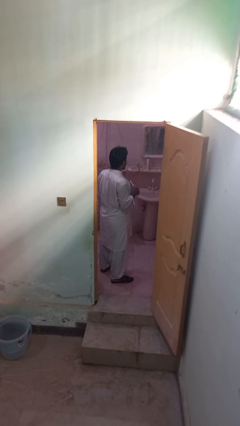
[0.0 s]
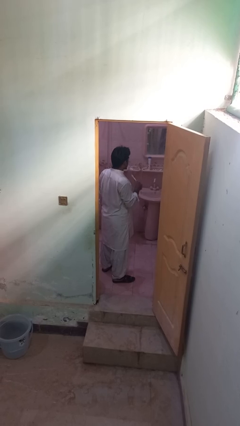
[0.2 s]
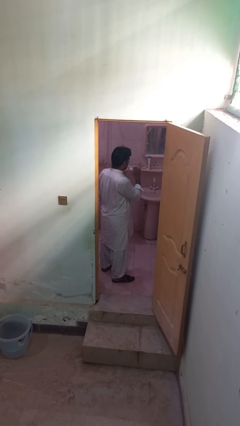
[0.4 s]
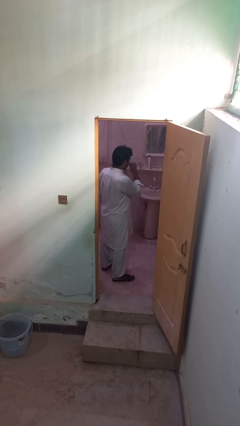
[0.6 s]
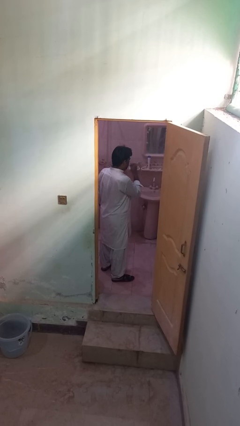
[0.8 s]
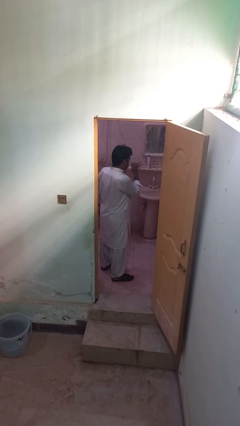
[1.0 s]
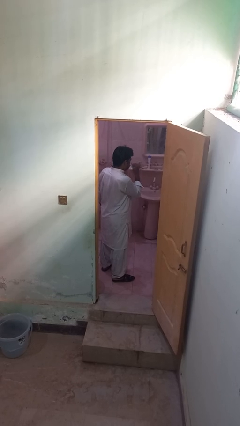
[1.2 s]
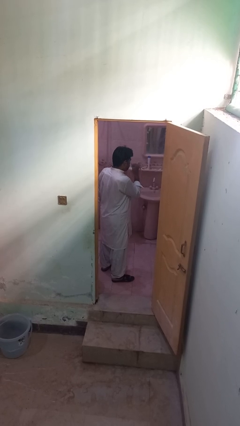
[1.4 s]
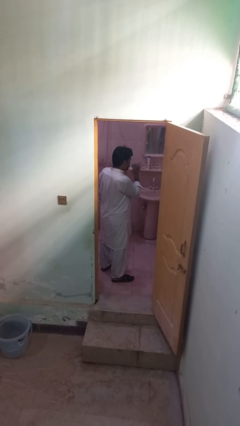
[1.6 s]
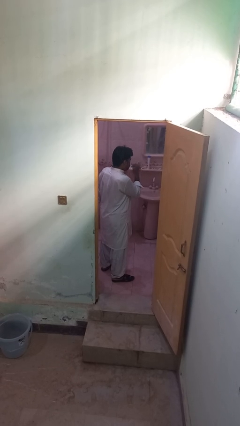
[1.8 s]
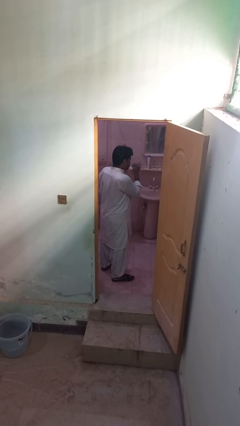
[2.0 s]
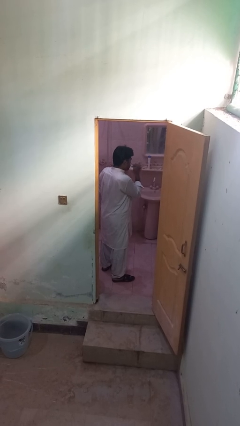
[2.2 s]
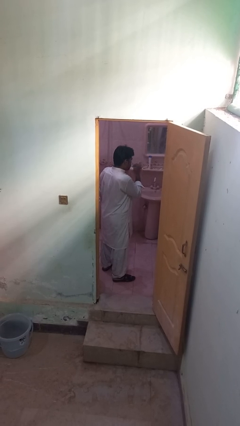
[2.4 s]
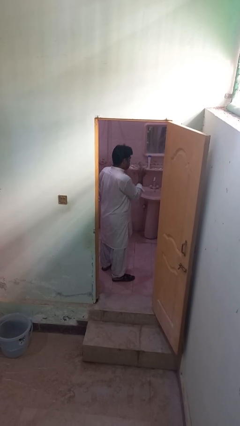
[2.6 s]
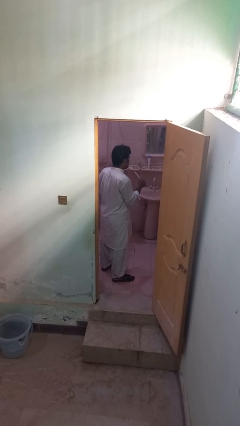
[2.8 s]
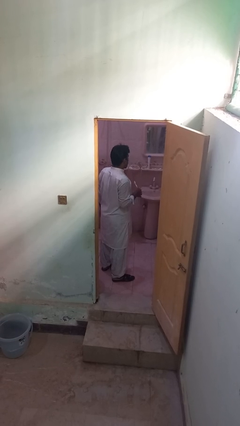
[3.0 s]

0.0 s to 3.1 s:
person brushes teeth

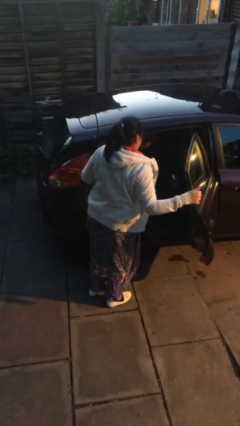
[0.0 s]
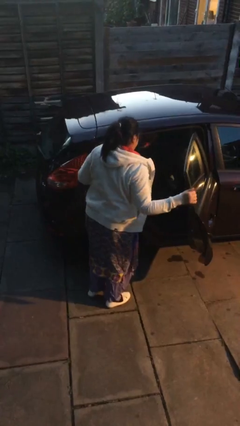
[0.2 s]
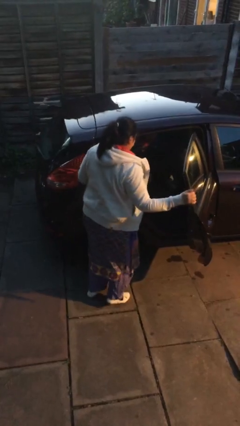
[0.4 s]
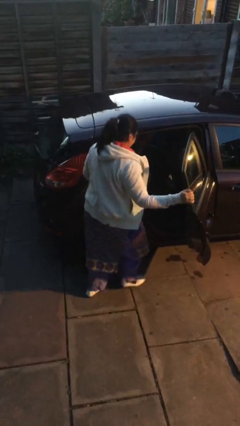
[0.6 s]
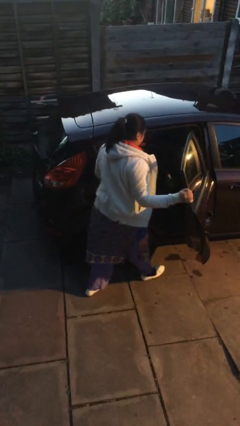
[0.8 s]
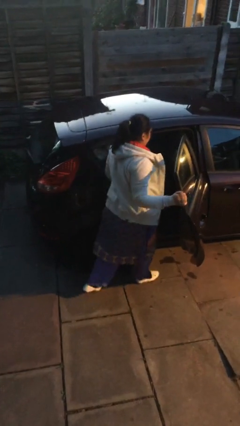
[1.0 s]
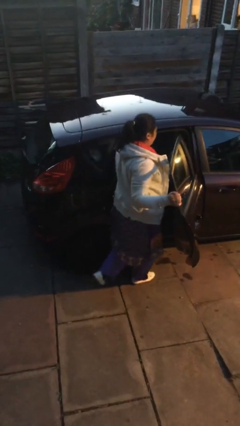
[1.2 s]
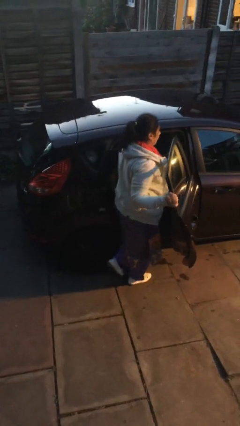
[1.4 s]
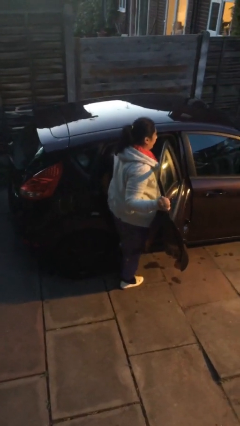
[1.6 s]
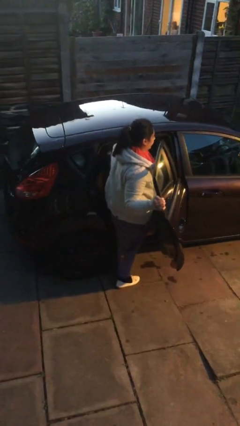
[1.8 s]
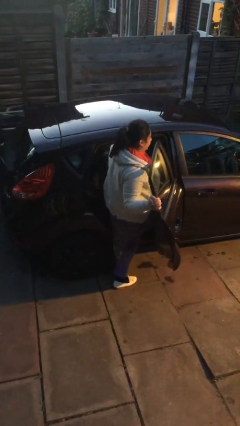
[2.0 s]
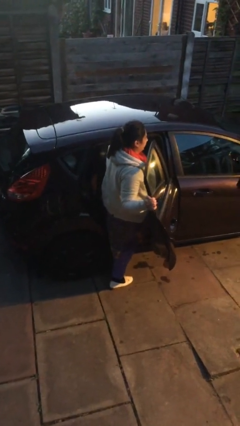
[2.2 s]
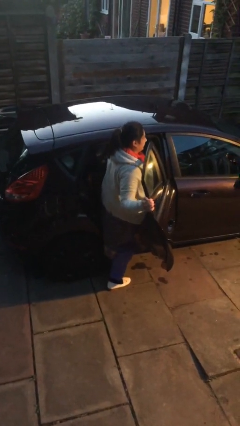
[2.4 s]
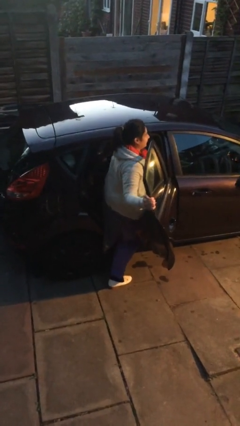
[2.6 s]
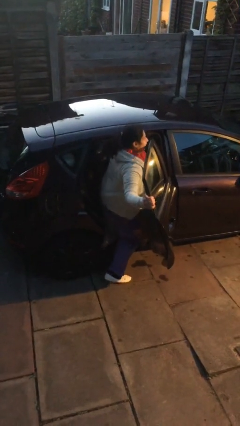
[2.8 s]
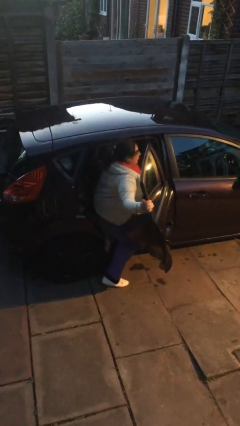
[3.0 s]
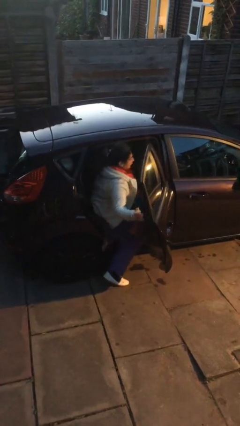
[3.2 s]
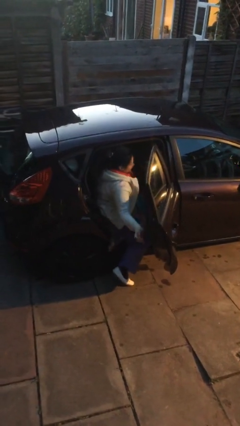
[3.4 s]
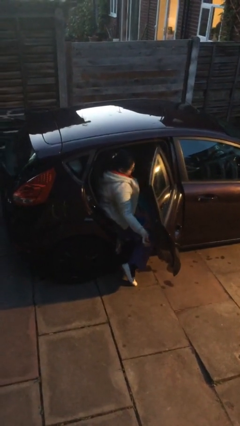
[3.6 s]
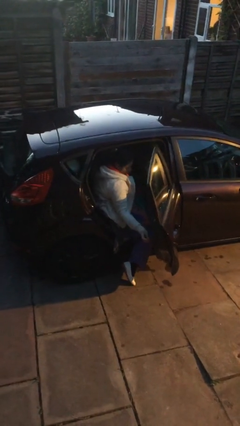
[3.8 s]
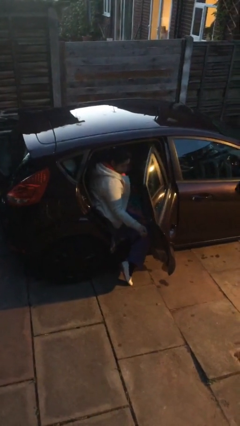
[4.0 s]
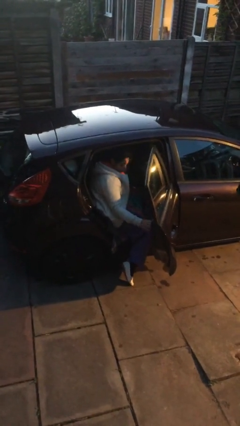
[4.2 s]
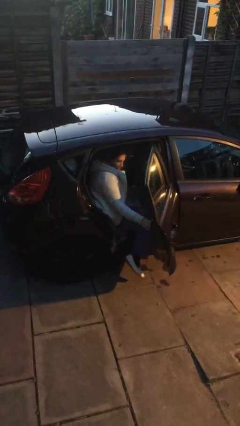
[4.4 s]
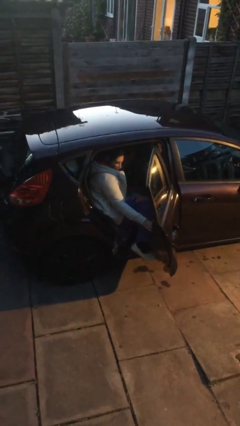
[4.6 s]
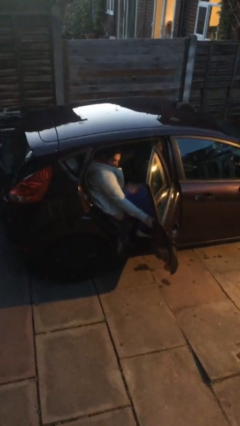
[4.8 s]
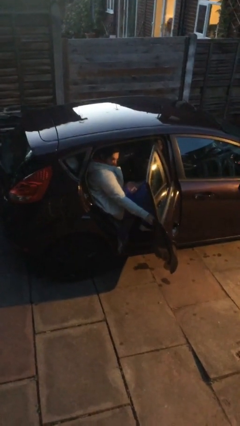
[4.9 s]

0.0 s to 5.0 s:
person enters car

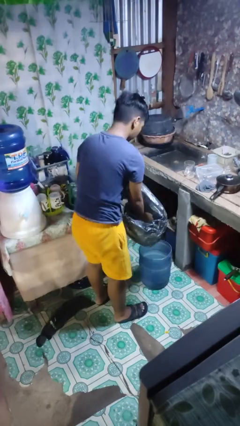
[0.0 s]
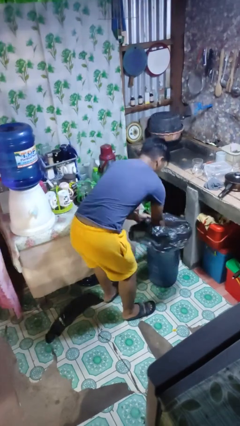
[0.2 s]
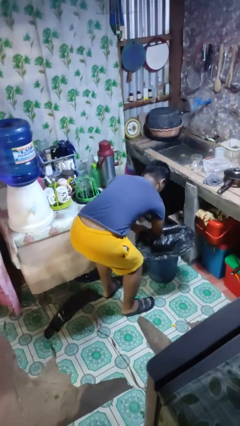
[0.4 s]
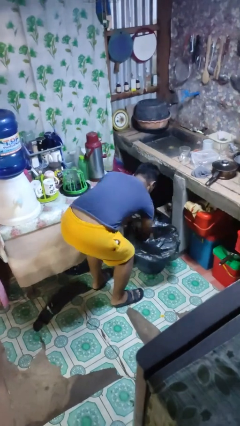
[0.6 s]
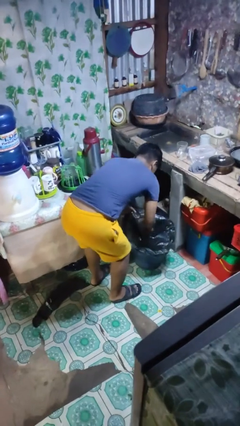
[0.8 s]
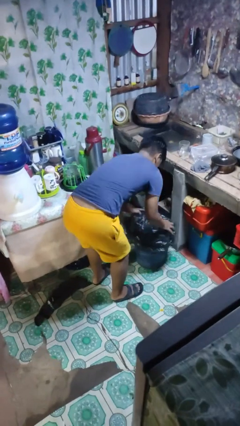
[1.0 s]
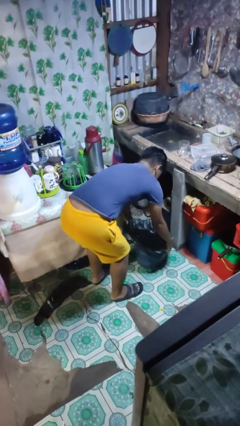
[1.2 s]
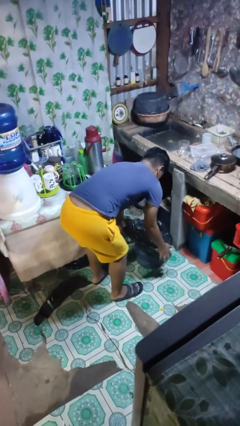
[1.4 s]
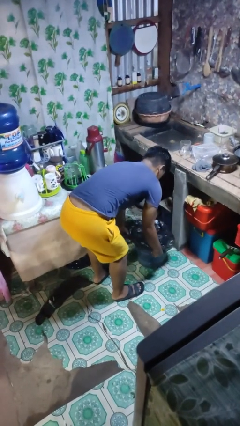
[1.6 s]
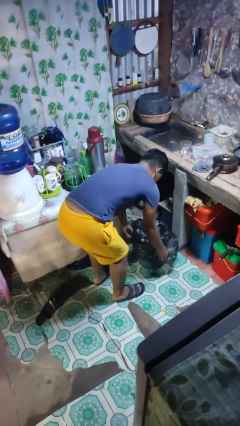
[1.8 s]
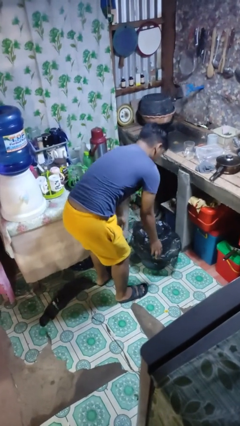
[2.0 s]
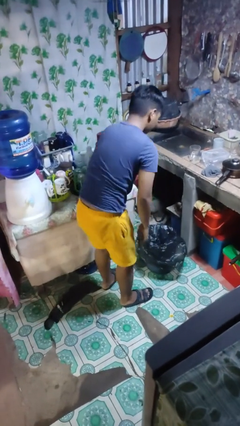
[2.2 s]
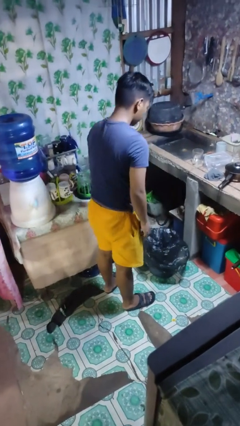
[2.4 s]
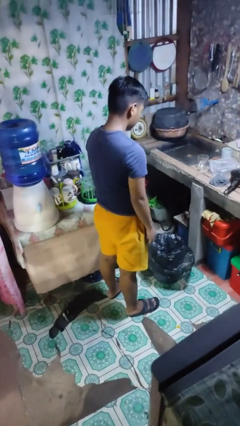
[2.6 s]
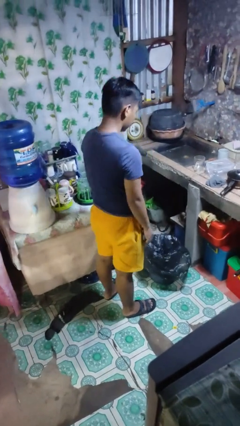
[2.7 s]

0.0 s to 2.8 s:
person inserts trashbag into trashcan

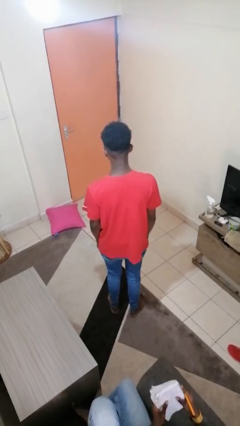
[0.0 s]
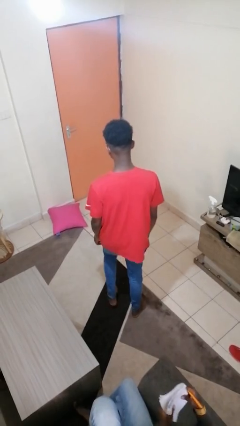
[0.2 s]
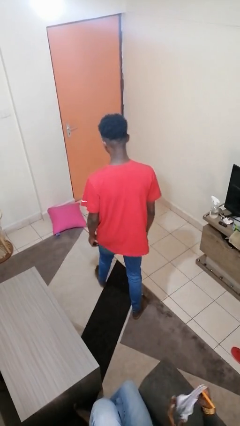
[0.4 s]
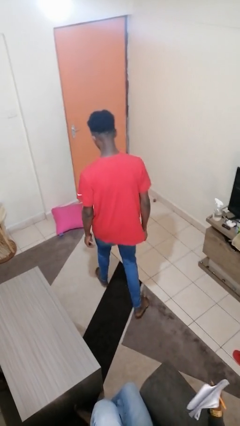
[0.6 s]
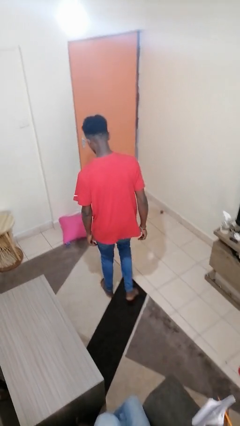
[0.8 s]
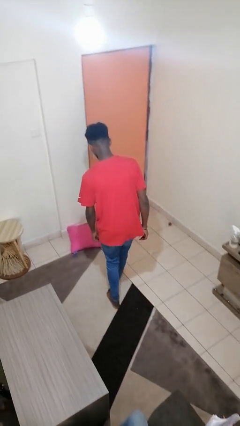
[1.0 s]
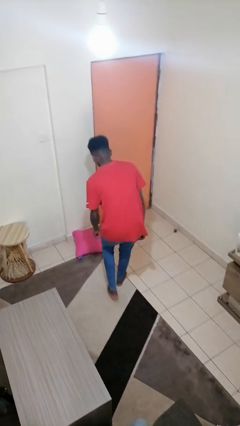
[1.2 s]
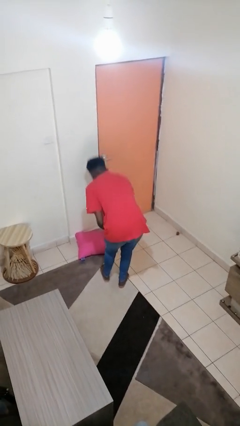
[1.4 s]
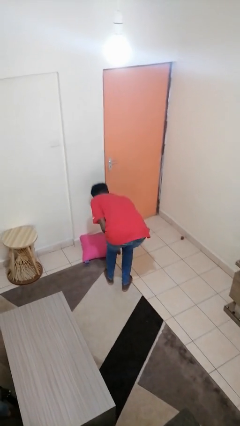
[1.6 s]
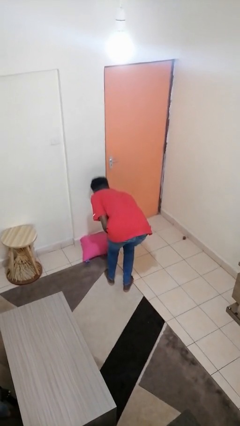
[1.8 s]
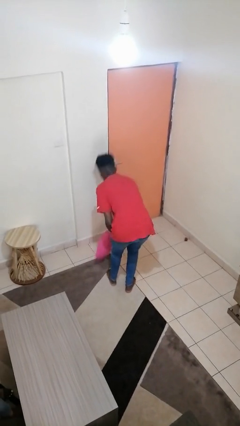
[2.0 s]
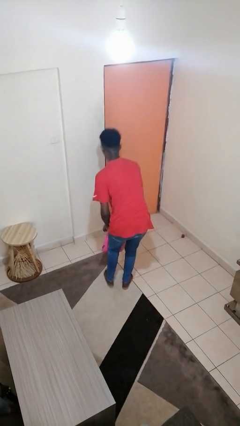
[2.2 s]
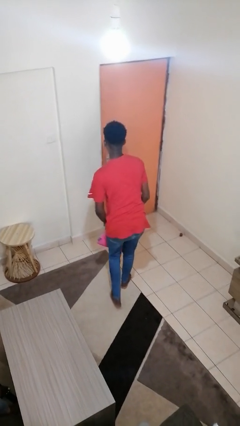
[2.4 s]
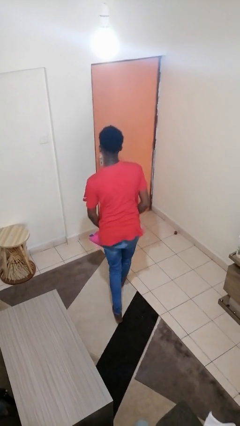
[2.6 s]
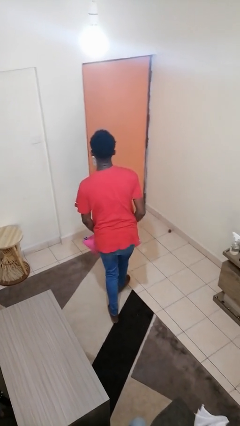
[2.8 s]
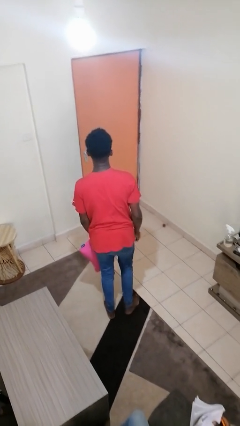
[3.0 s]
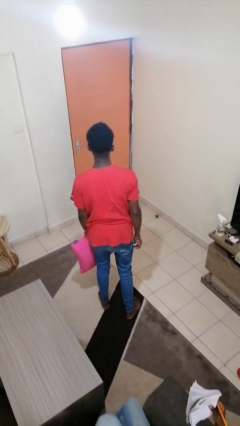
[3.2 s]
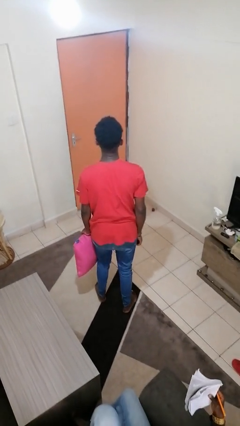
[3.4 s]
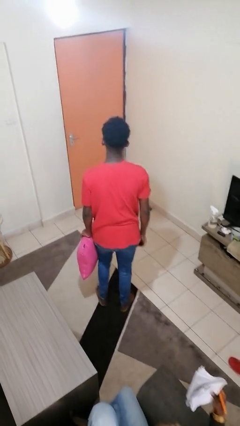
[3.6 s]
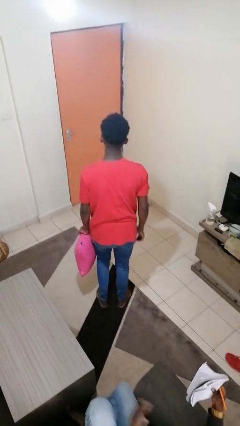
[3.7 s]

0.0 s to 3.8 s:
person picks up object from floor

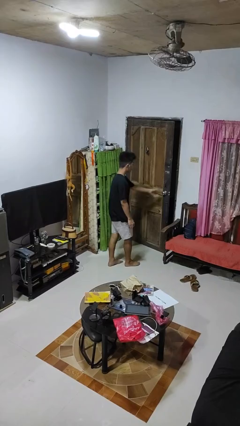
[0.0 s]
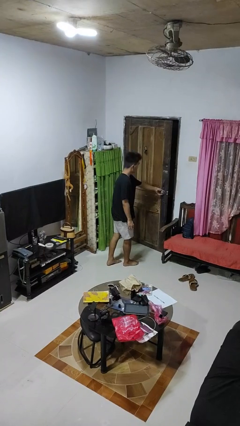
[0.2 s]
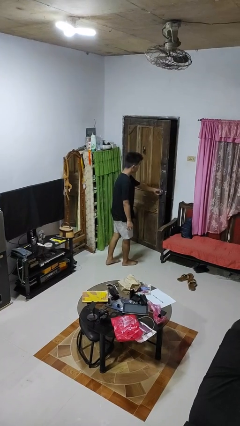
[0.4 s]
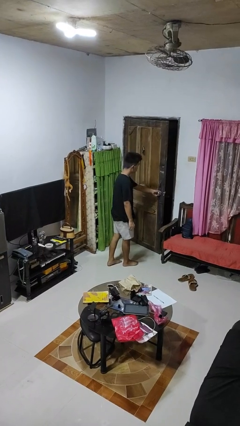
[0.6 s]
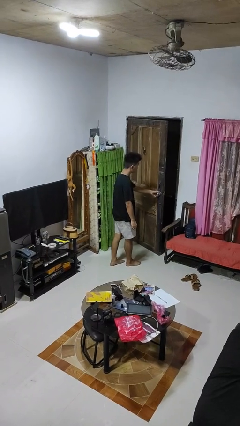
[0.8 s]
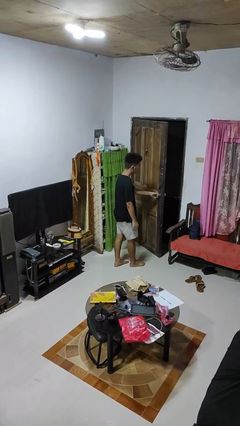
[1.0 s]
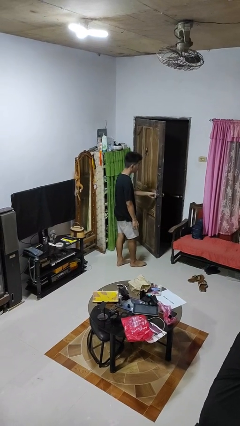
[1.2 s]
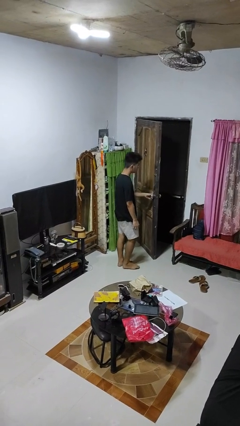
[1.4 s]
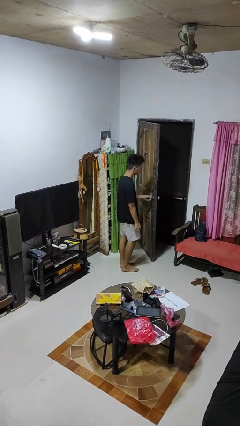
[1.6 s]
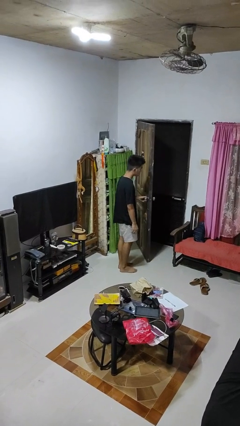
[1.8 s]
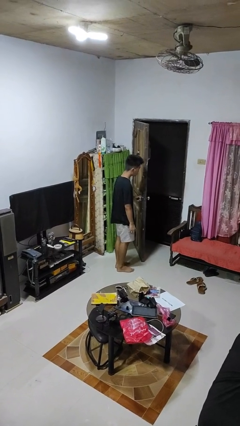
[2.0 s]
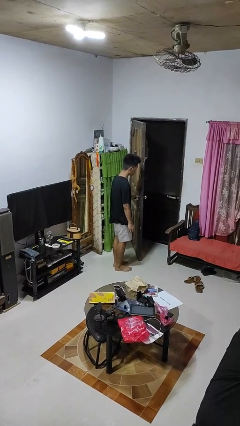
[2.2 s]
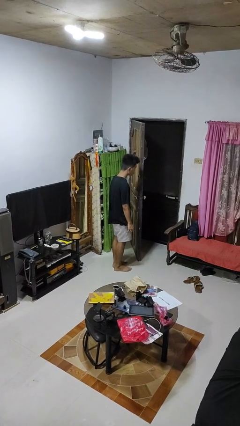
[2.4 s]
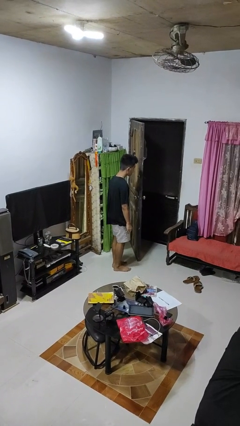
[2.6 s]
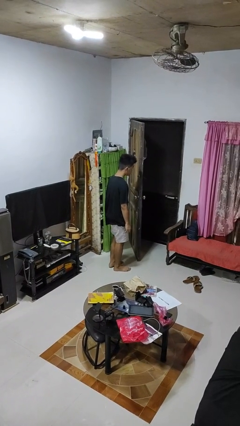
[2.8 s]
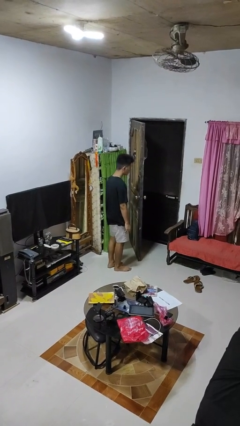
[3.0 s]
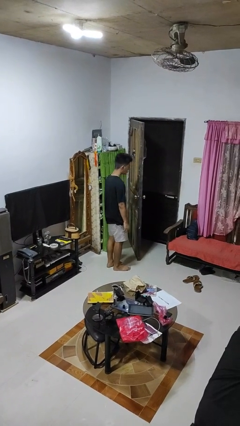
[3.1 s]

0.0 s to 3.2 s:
person opens facility door
